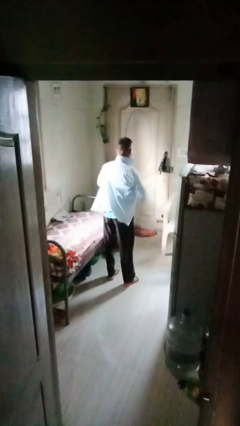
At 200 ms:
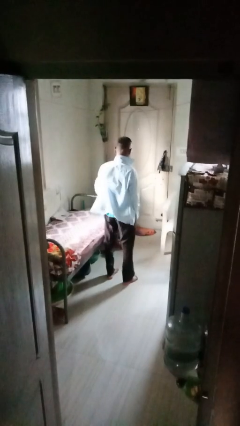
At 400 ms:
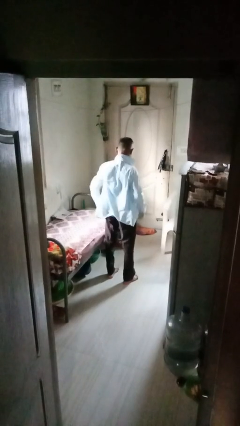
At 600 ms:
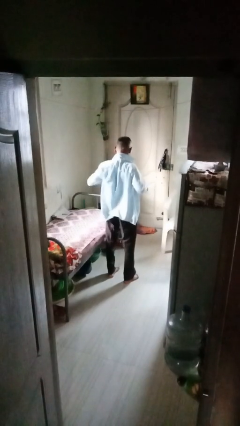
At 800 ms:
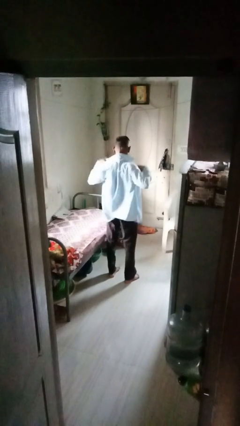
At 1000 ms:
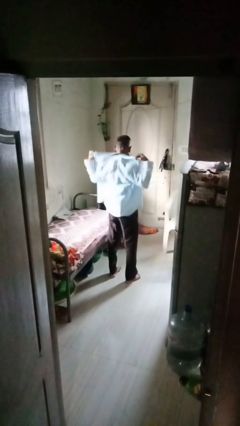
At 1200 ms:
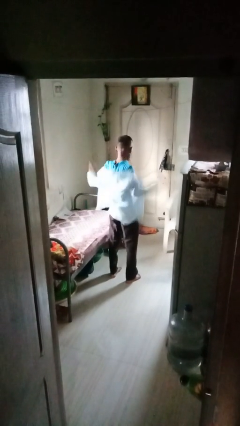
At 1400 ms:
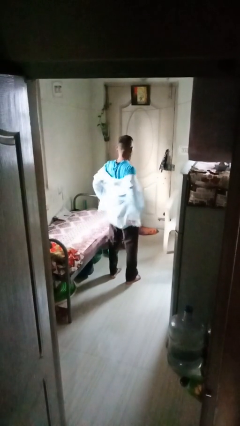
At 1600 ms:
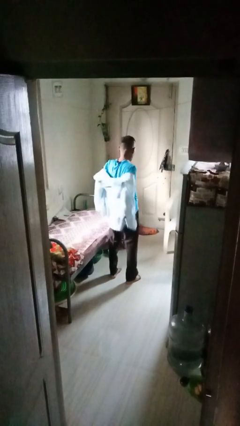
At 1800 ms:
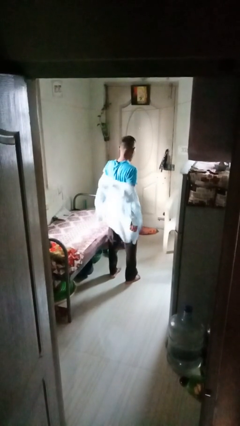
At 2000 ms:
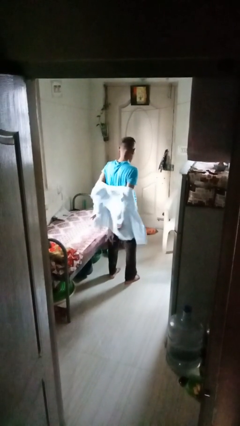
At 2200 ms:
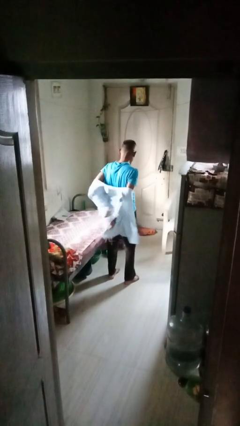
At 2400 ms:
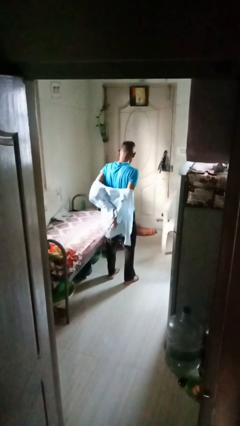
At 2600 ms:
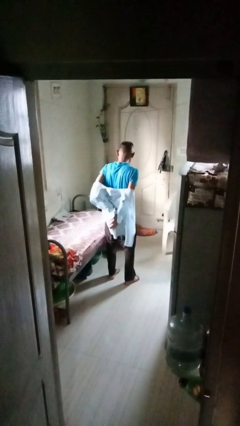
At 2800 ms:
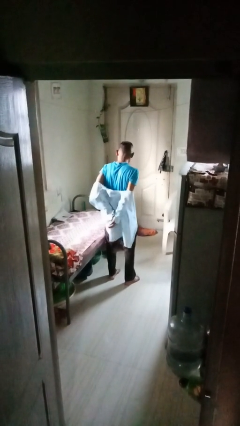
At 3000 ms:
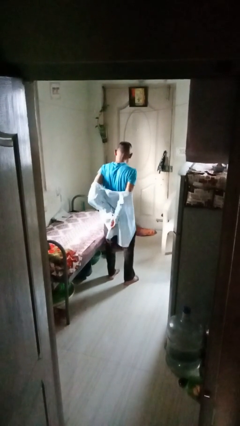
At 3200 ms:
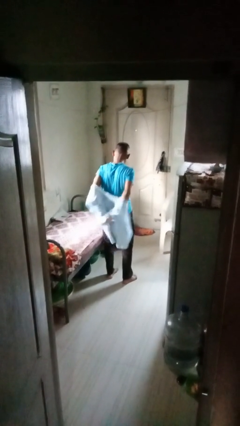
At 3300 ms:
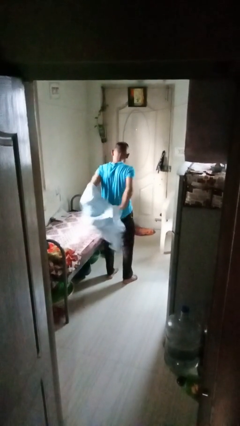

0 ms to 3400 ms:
person takes off shirt

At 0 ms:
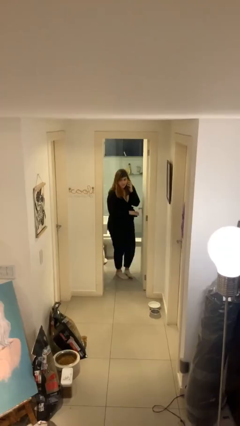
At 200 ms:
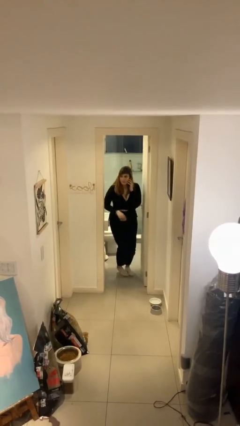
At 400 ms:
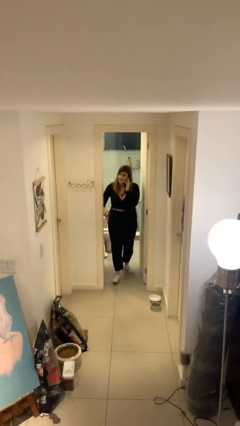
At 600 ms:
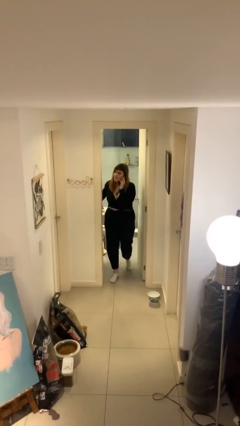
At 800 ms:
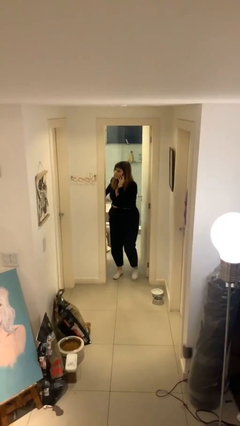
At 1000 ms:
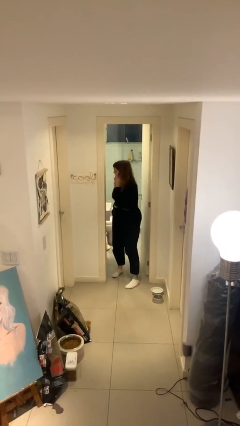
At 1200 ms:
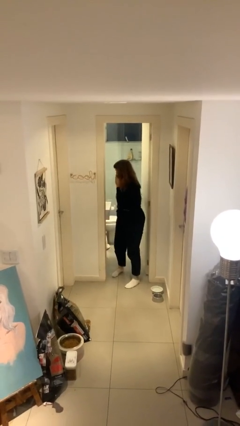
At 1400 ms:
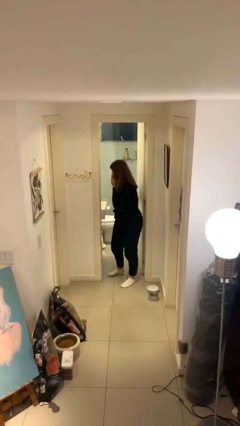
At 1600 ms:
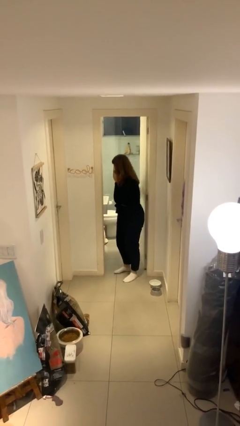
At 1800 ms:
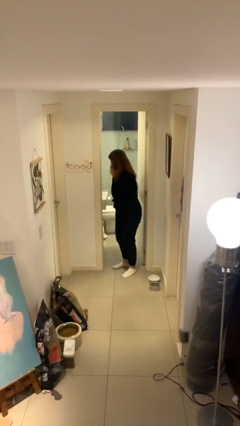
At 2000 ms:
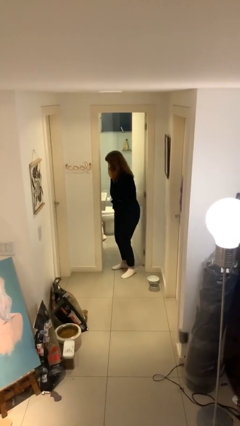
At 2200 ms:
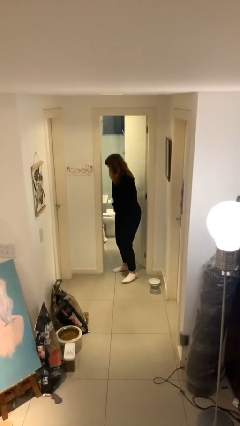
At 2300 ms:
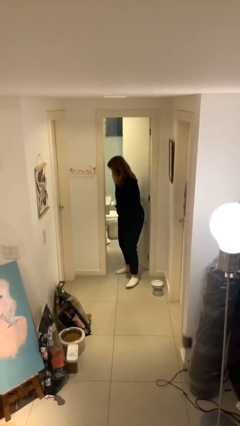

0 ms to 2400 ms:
person enters scene through structure

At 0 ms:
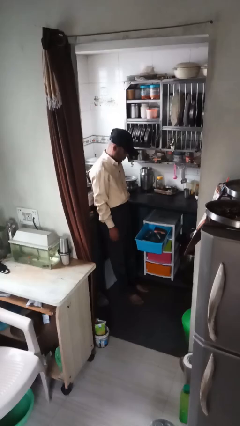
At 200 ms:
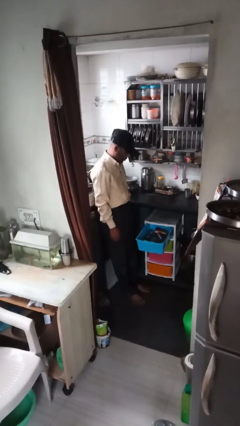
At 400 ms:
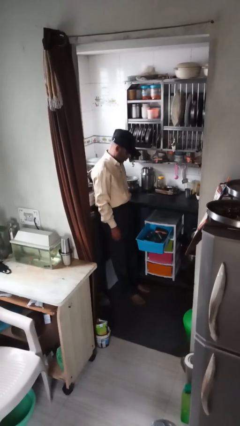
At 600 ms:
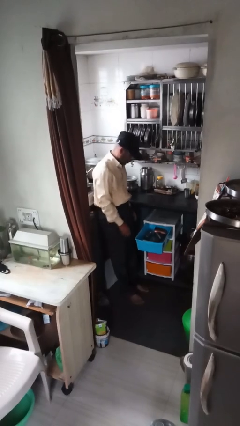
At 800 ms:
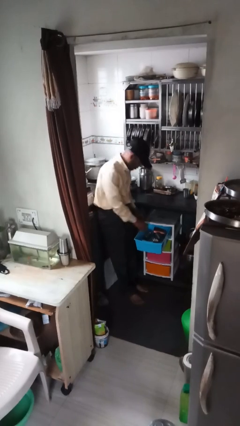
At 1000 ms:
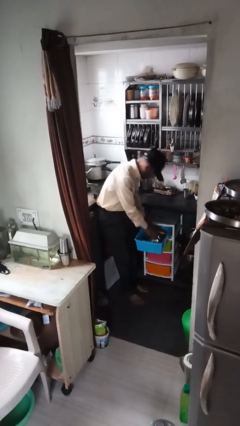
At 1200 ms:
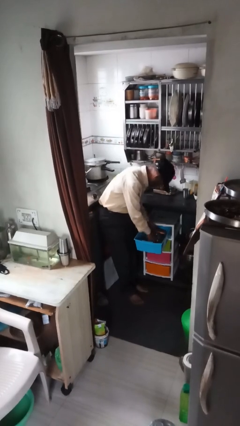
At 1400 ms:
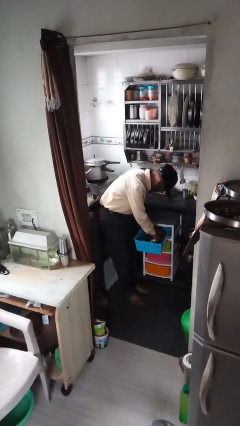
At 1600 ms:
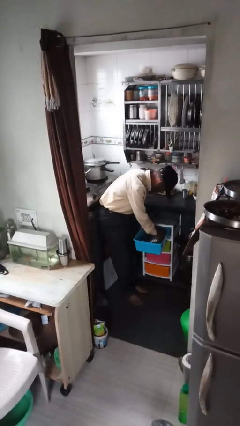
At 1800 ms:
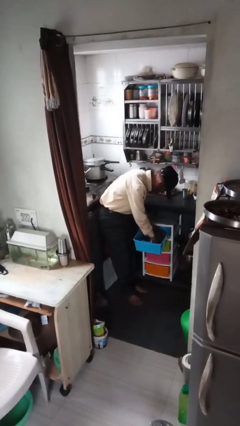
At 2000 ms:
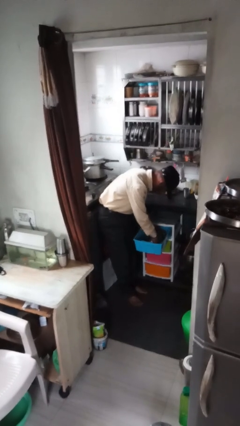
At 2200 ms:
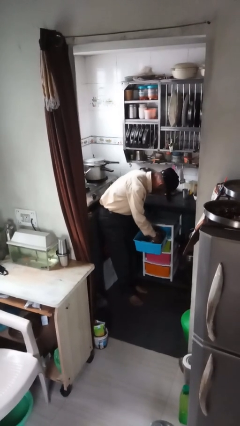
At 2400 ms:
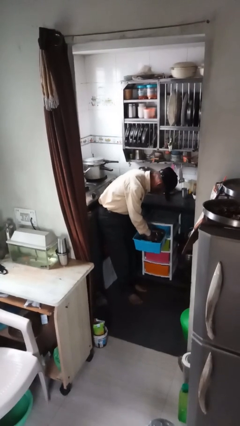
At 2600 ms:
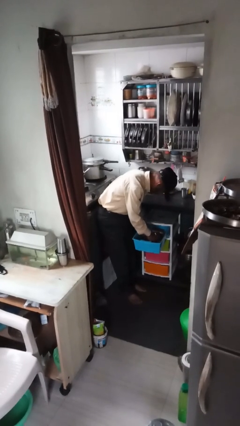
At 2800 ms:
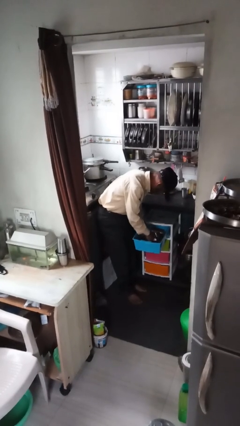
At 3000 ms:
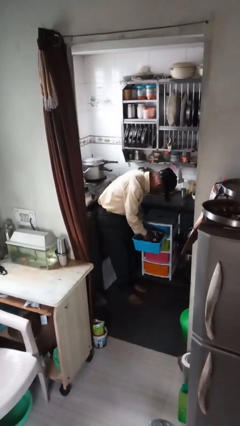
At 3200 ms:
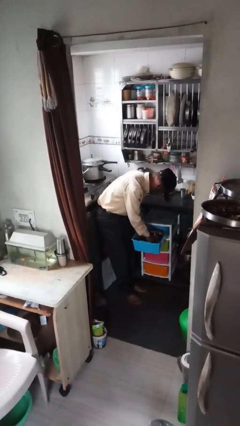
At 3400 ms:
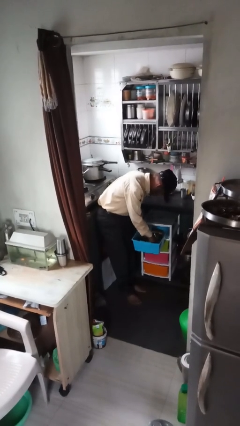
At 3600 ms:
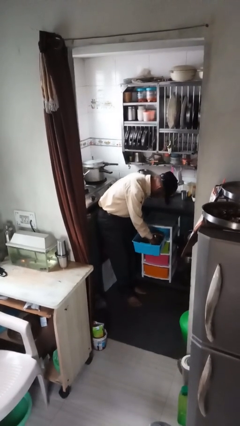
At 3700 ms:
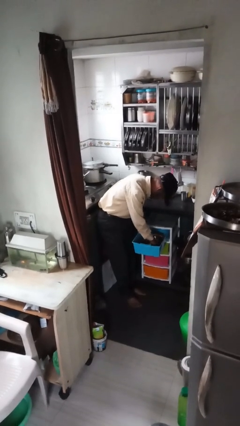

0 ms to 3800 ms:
person searches in kitchen drawer

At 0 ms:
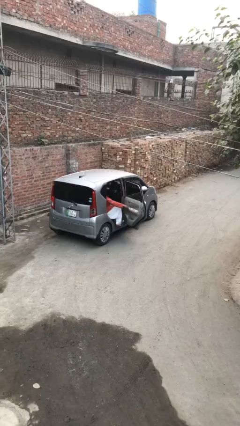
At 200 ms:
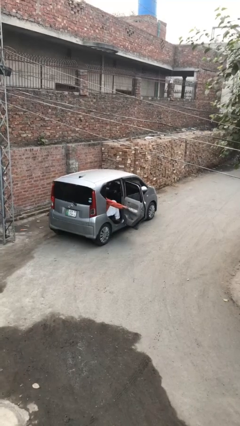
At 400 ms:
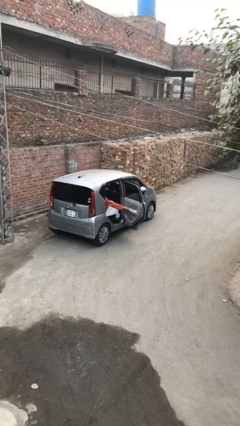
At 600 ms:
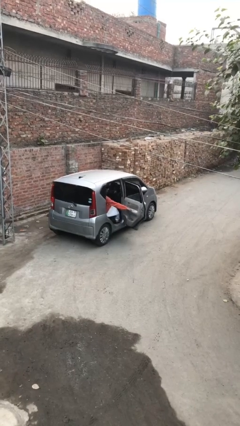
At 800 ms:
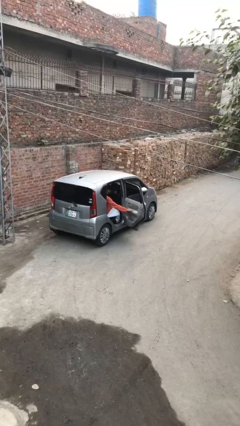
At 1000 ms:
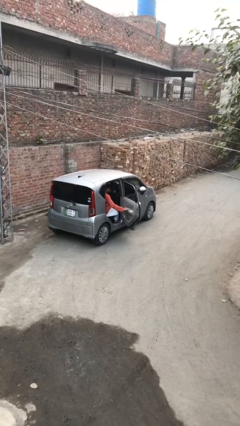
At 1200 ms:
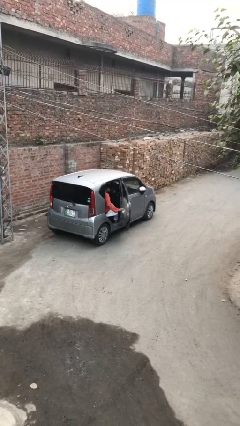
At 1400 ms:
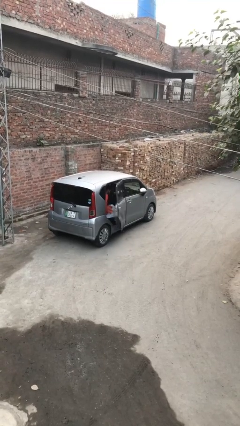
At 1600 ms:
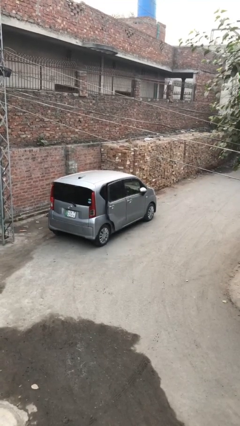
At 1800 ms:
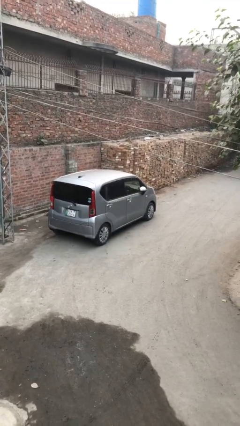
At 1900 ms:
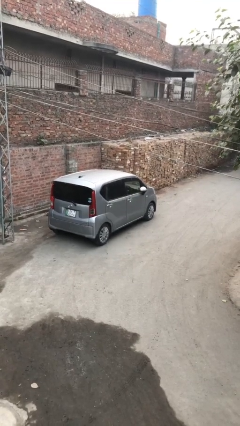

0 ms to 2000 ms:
person closes car door

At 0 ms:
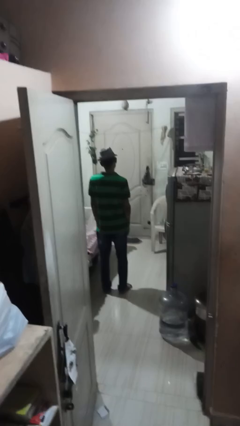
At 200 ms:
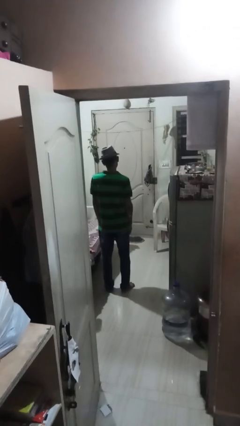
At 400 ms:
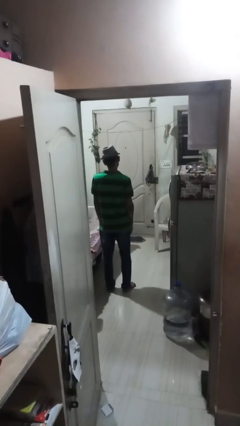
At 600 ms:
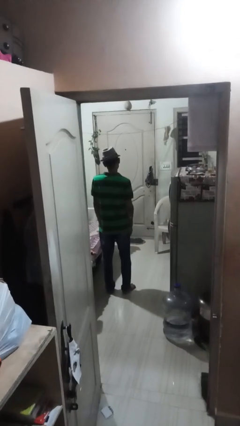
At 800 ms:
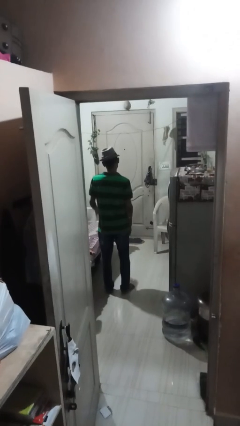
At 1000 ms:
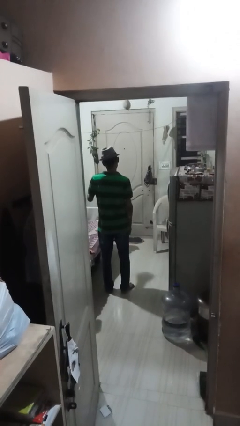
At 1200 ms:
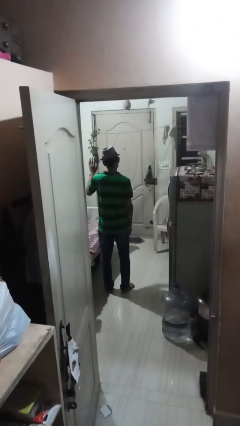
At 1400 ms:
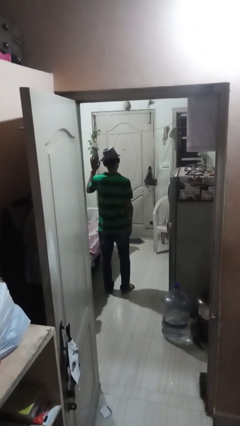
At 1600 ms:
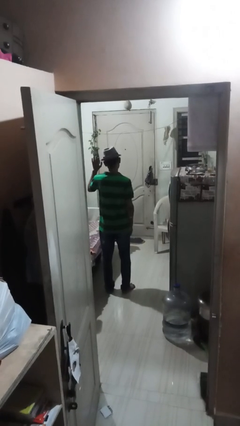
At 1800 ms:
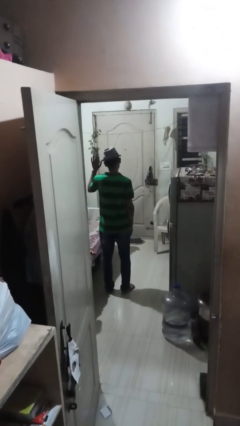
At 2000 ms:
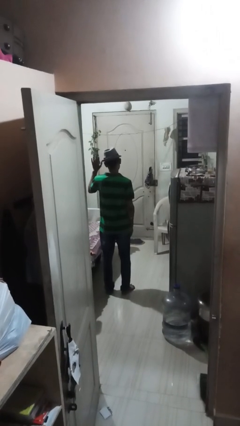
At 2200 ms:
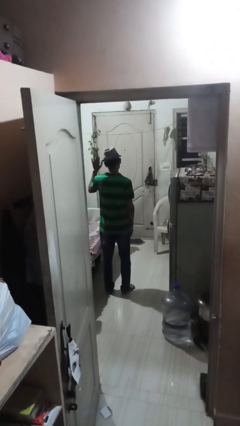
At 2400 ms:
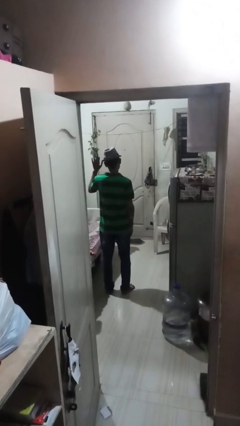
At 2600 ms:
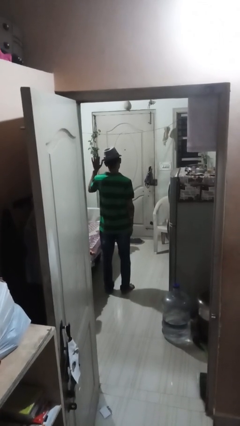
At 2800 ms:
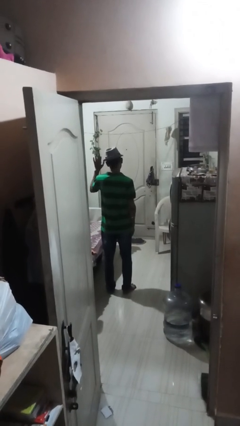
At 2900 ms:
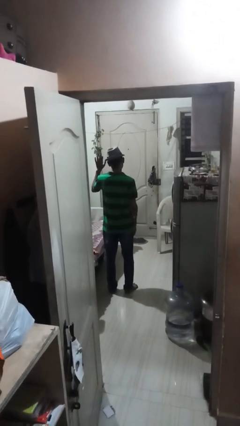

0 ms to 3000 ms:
person gestures number five

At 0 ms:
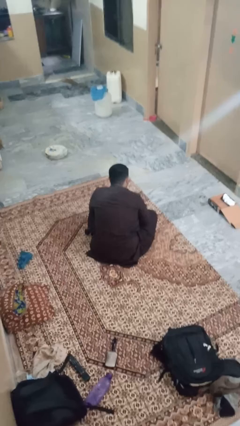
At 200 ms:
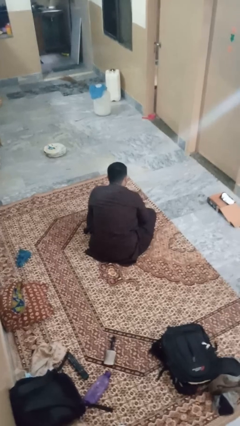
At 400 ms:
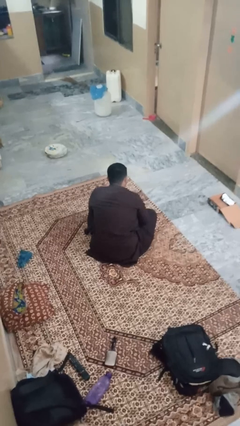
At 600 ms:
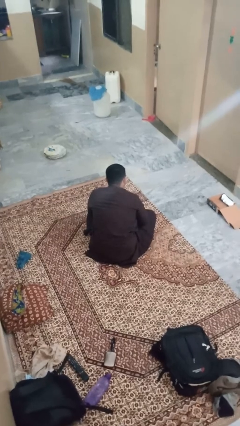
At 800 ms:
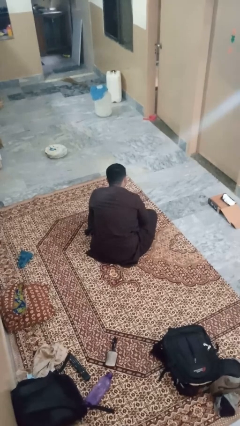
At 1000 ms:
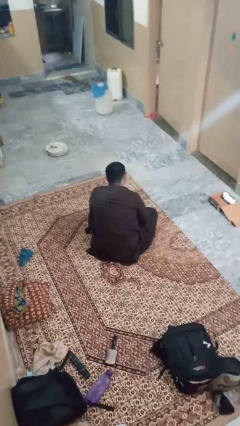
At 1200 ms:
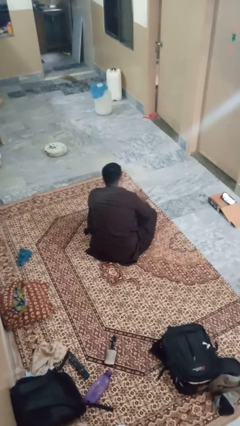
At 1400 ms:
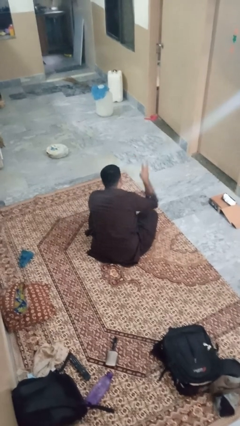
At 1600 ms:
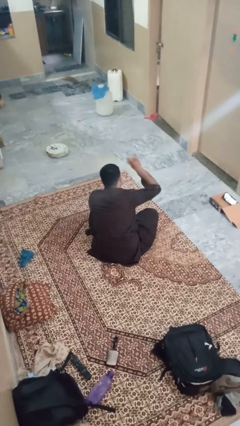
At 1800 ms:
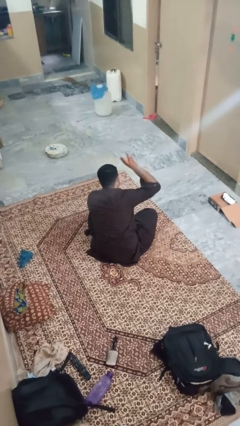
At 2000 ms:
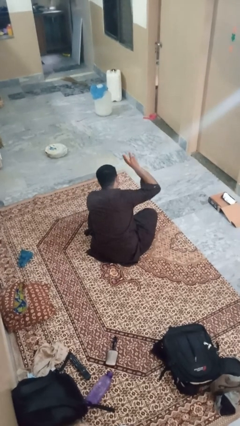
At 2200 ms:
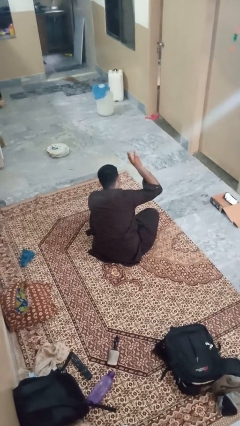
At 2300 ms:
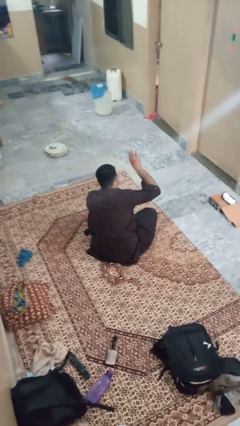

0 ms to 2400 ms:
person gestures number three

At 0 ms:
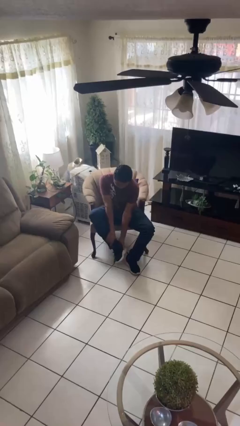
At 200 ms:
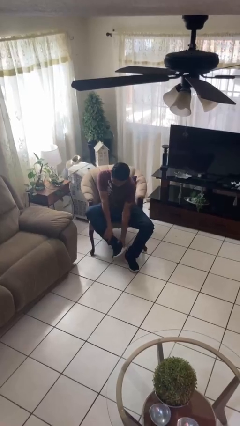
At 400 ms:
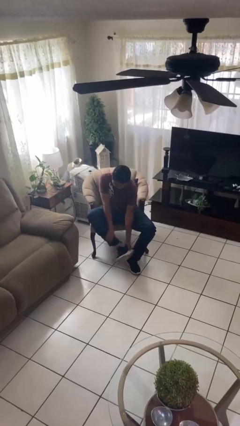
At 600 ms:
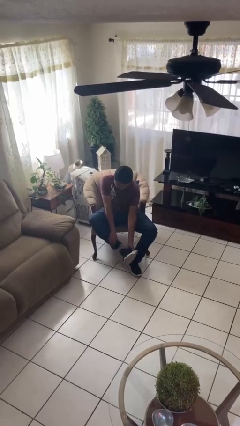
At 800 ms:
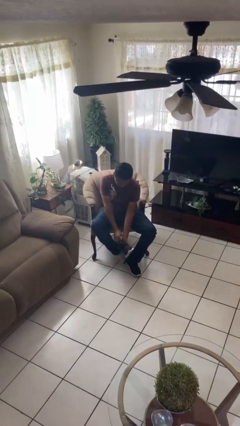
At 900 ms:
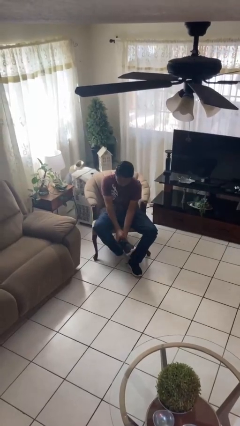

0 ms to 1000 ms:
person takes off shoes
